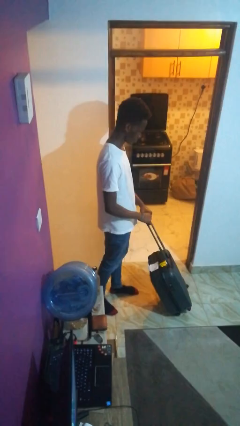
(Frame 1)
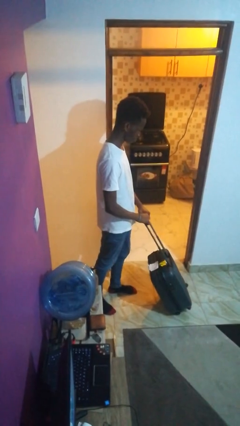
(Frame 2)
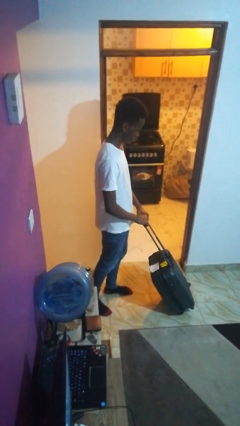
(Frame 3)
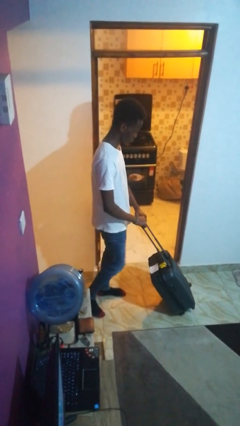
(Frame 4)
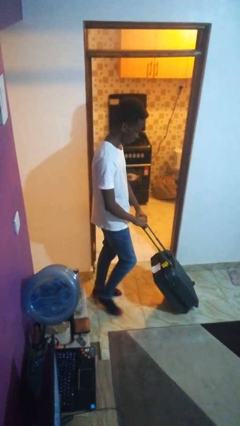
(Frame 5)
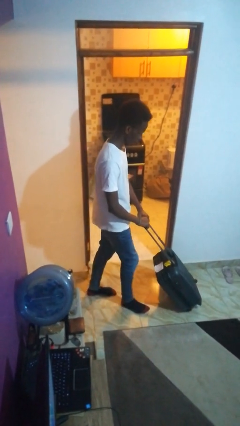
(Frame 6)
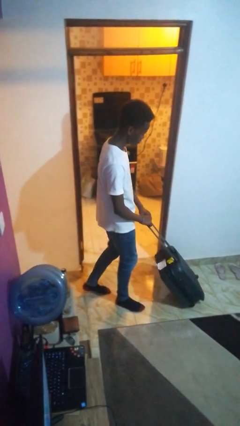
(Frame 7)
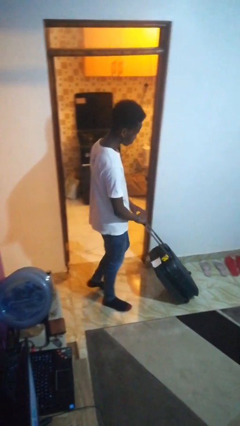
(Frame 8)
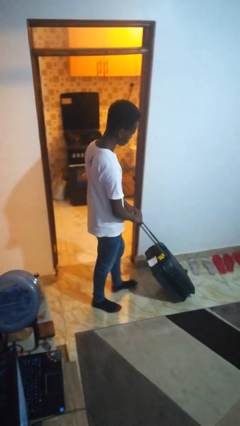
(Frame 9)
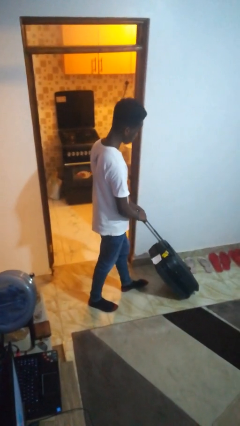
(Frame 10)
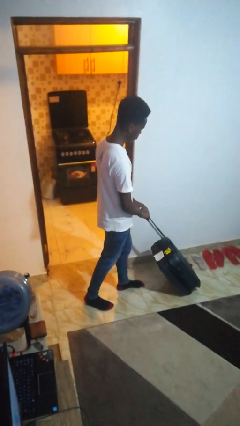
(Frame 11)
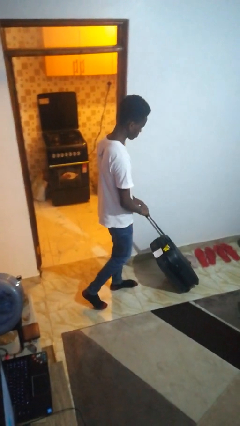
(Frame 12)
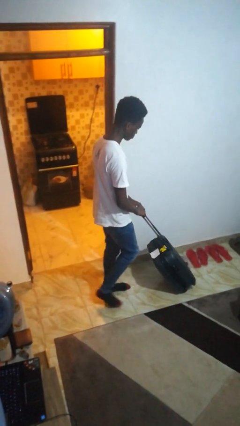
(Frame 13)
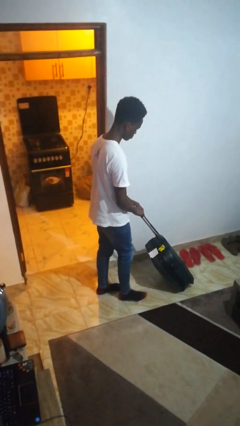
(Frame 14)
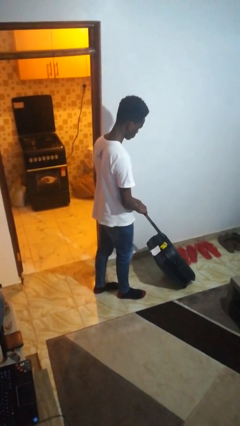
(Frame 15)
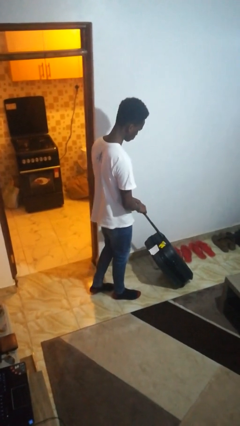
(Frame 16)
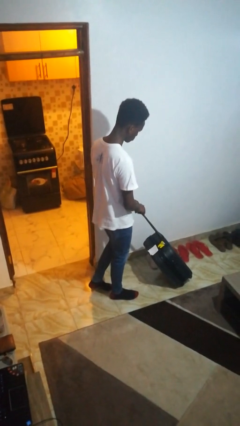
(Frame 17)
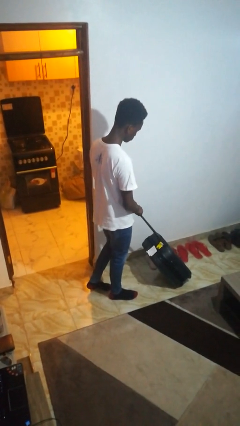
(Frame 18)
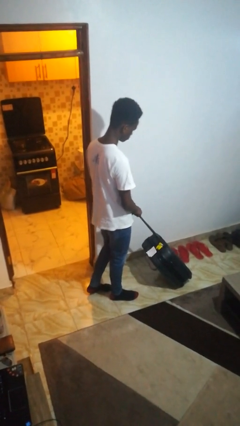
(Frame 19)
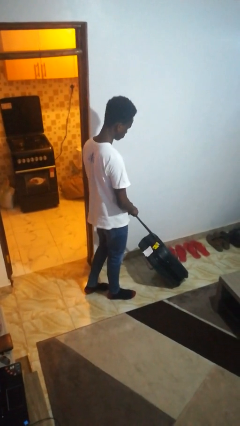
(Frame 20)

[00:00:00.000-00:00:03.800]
person pushes wheeled cart

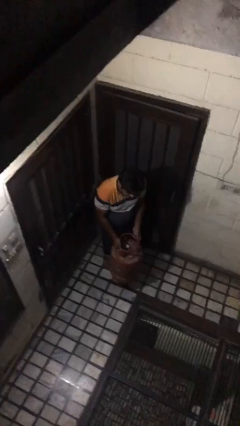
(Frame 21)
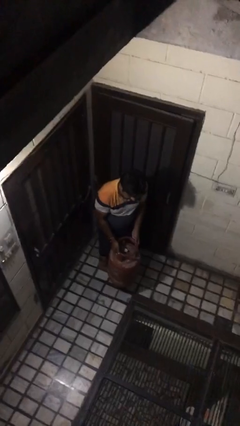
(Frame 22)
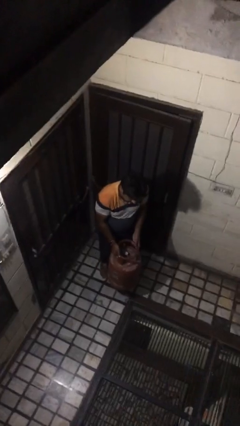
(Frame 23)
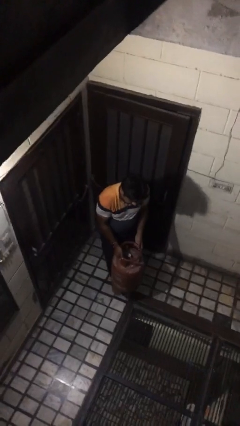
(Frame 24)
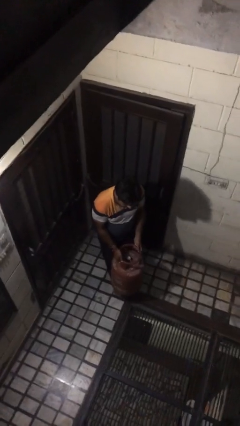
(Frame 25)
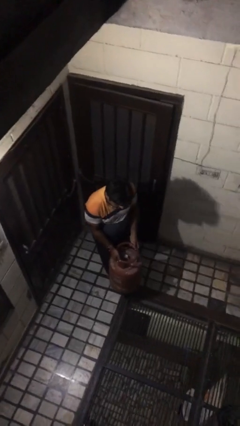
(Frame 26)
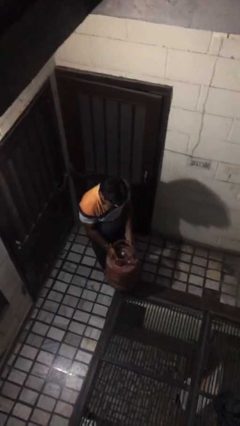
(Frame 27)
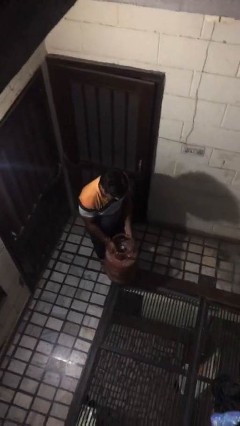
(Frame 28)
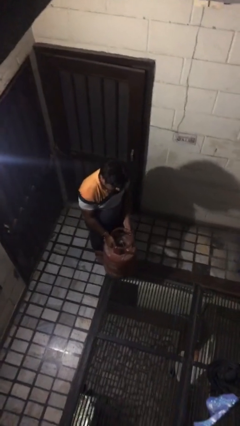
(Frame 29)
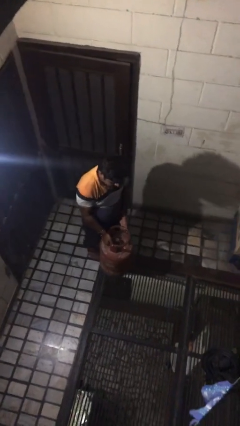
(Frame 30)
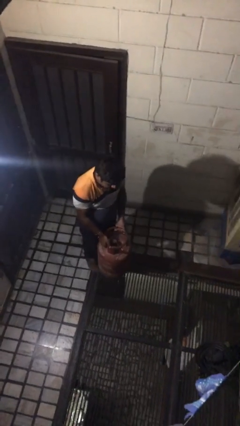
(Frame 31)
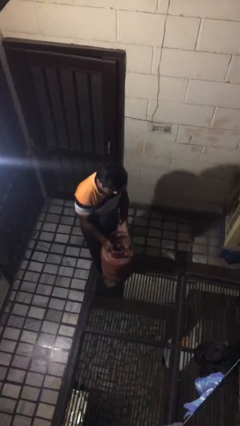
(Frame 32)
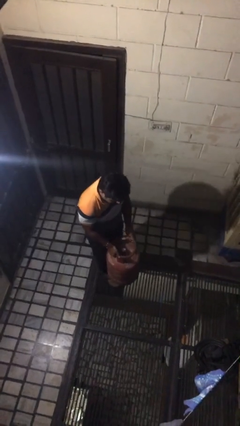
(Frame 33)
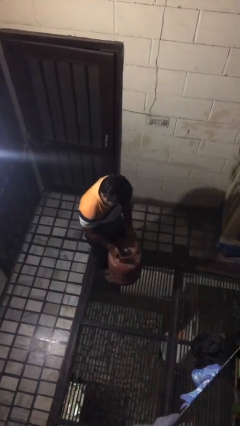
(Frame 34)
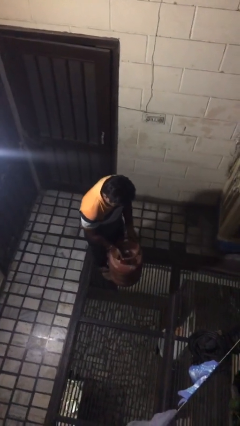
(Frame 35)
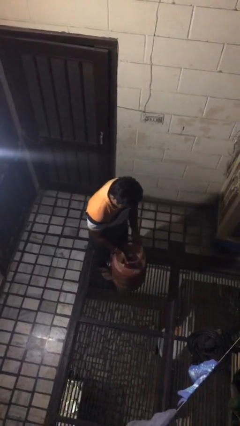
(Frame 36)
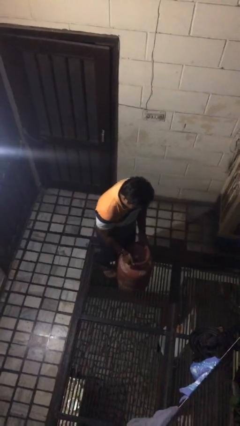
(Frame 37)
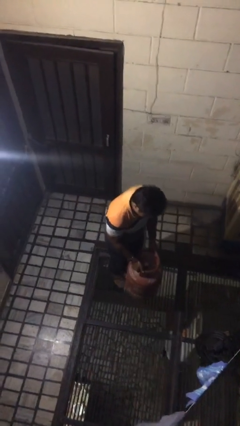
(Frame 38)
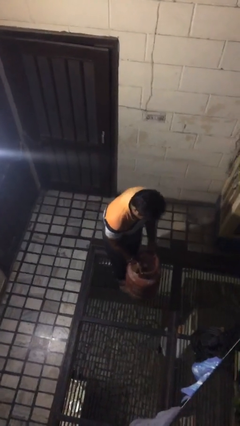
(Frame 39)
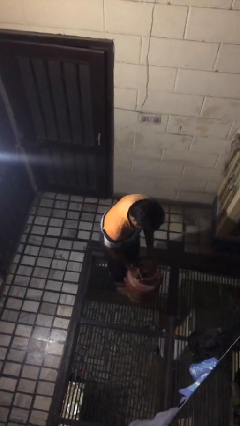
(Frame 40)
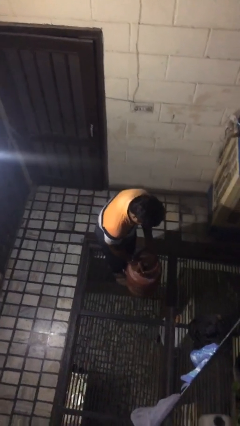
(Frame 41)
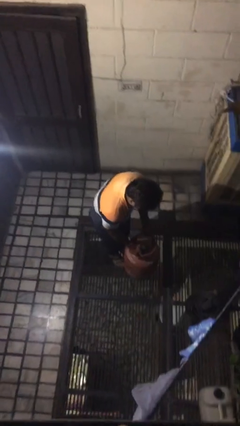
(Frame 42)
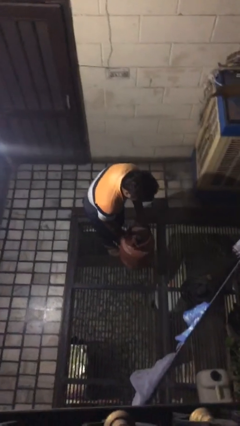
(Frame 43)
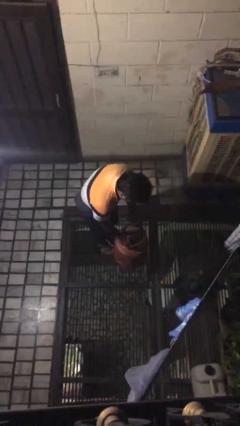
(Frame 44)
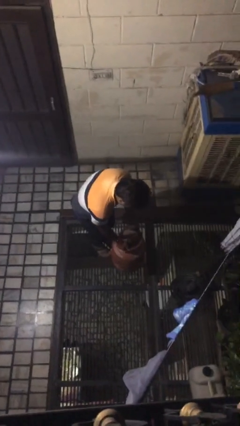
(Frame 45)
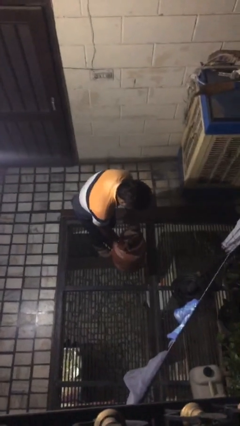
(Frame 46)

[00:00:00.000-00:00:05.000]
person carries heavy object

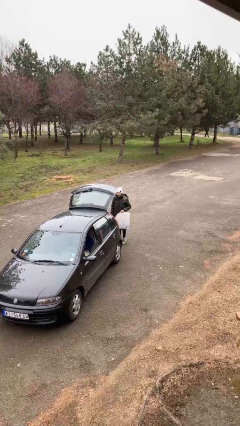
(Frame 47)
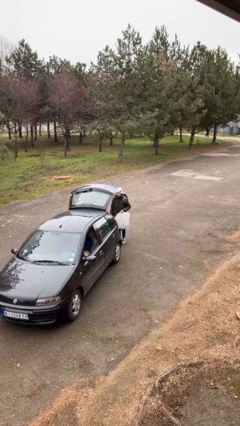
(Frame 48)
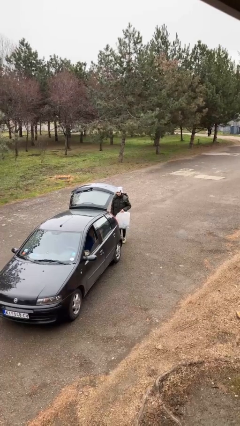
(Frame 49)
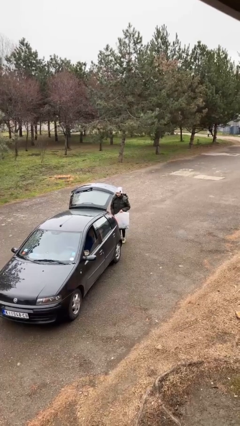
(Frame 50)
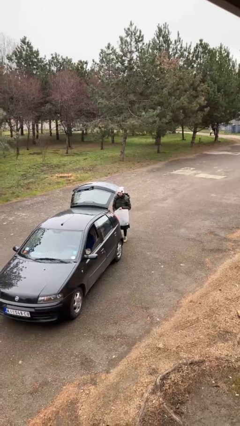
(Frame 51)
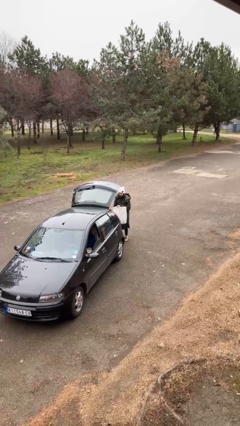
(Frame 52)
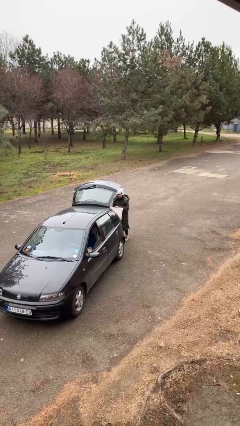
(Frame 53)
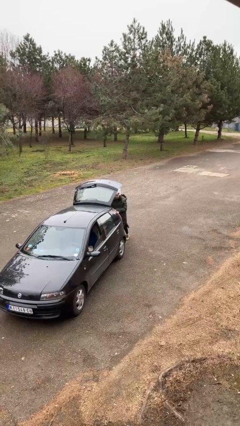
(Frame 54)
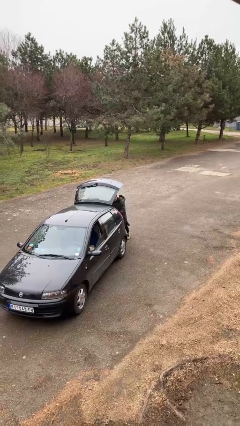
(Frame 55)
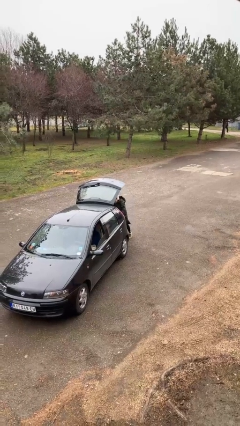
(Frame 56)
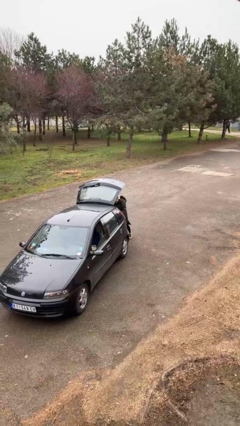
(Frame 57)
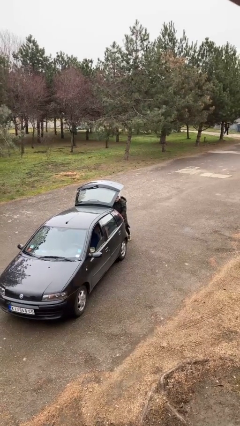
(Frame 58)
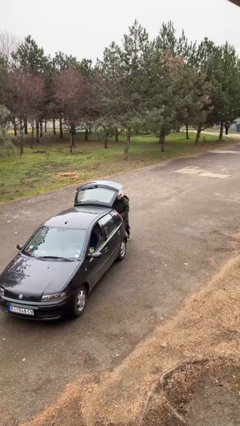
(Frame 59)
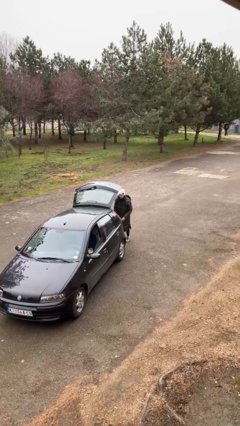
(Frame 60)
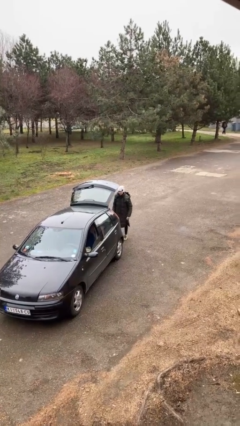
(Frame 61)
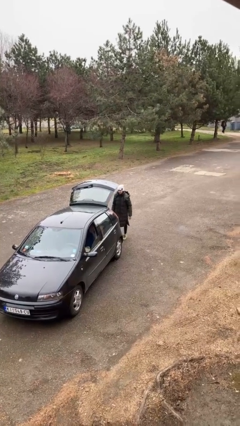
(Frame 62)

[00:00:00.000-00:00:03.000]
person loads car

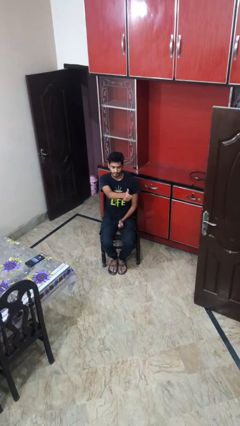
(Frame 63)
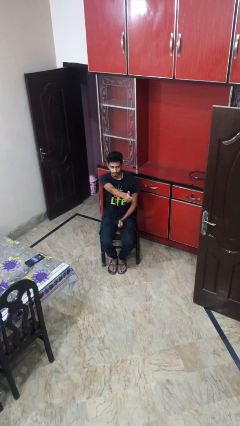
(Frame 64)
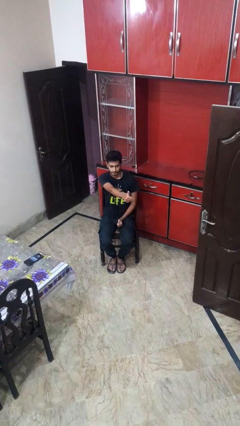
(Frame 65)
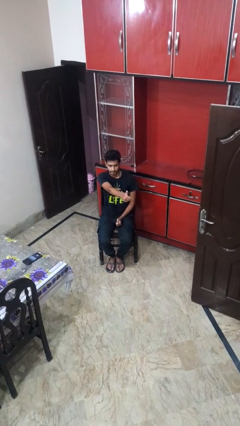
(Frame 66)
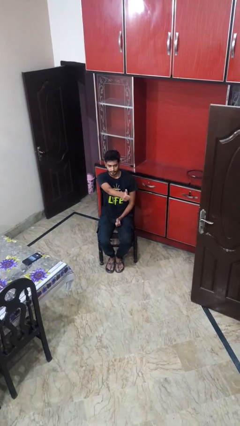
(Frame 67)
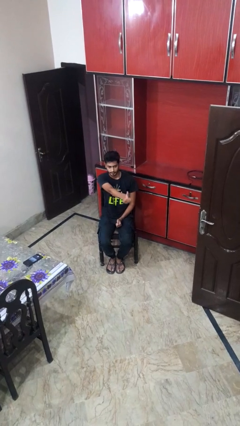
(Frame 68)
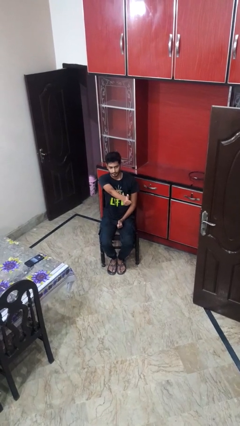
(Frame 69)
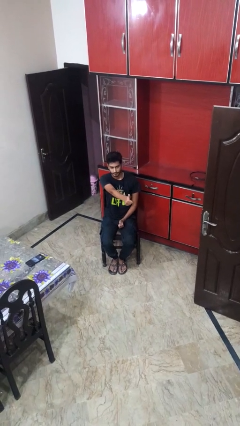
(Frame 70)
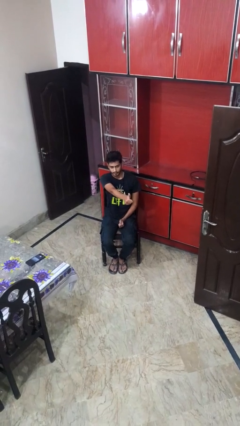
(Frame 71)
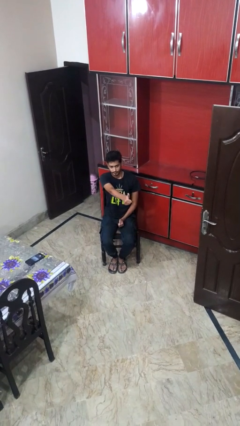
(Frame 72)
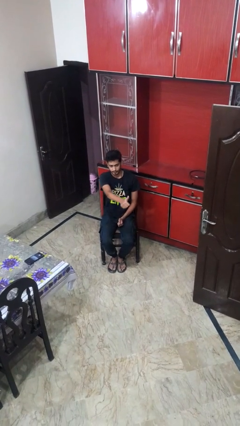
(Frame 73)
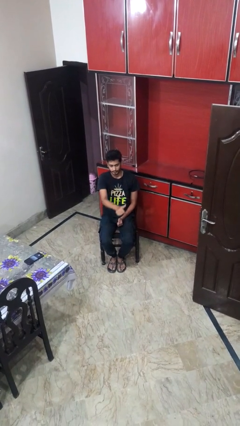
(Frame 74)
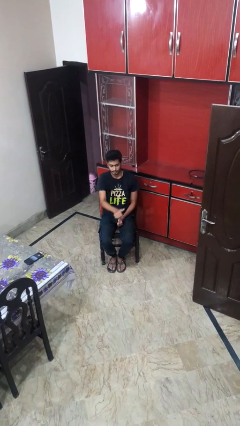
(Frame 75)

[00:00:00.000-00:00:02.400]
person gestures thumbs up

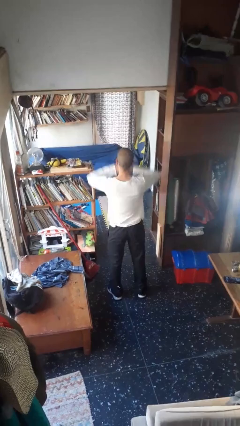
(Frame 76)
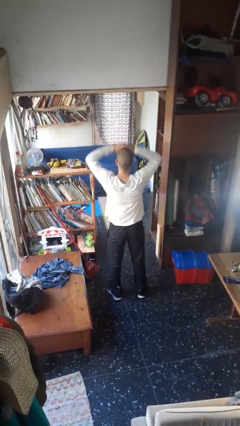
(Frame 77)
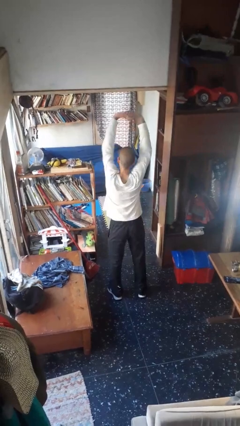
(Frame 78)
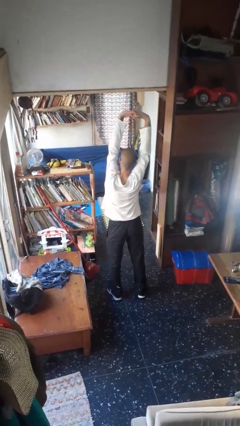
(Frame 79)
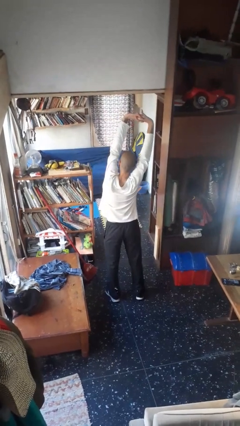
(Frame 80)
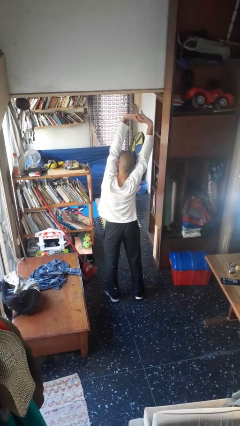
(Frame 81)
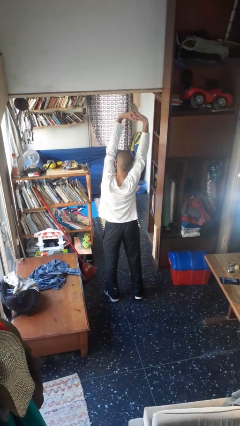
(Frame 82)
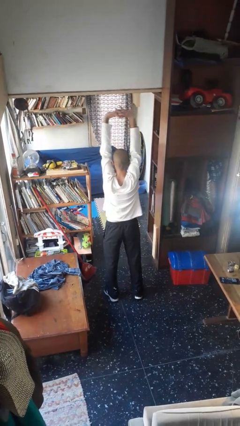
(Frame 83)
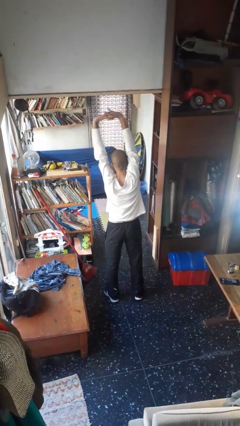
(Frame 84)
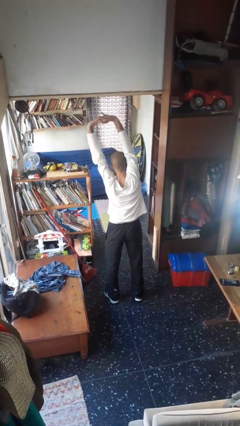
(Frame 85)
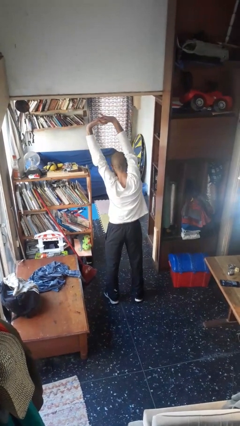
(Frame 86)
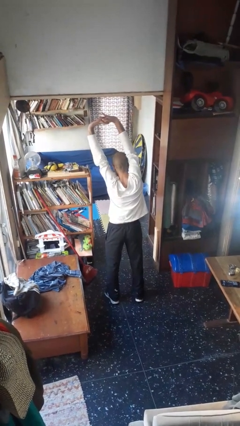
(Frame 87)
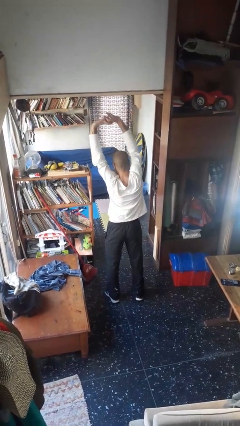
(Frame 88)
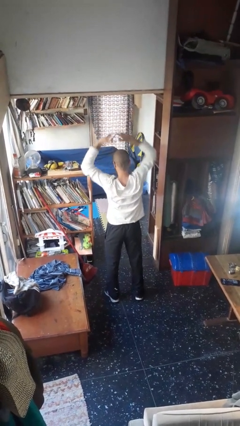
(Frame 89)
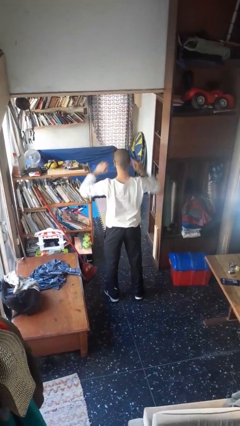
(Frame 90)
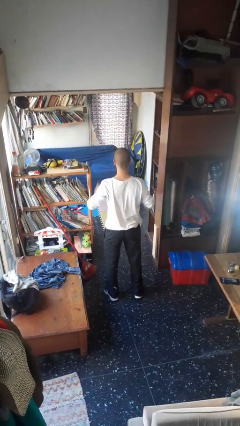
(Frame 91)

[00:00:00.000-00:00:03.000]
person stretches arms over head

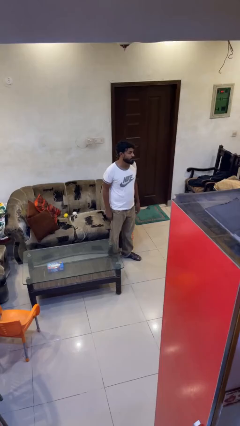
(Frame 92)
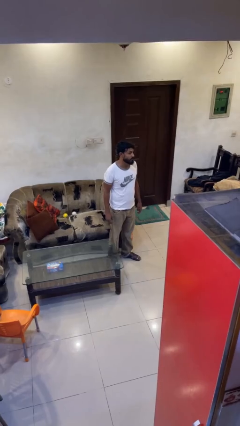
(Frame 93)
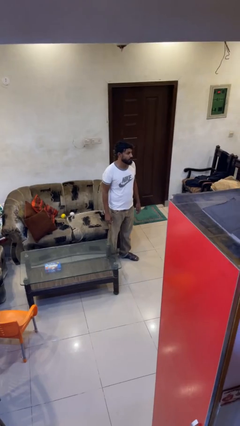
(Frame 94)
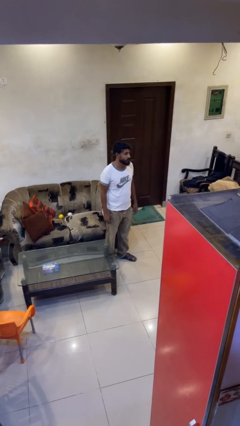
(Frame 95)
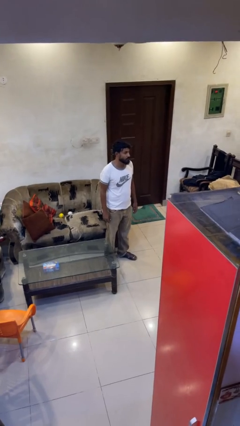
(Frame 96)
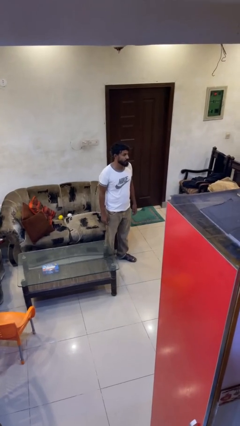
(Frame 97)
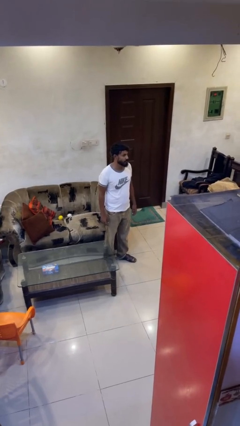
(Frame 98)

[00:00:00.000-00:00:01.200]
person puts hands in back pockets
